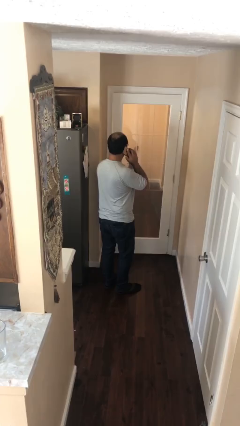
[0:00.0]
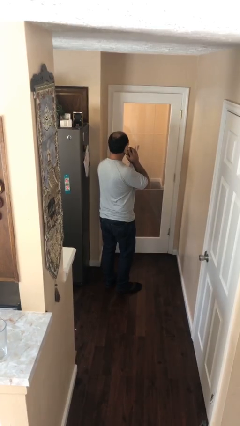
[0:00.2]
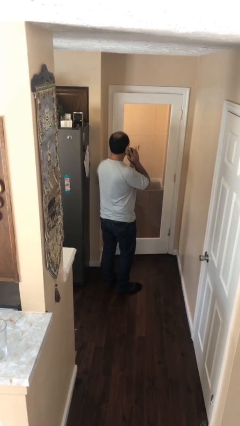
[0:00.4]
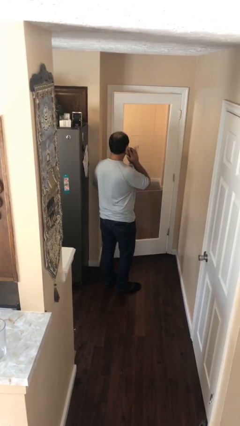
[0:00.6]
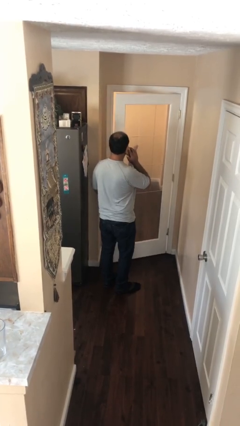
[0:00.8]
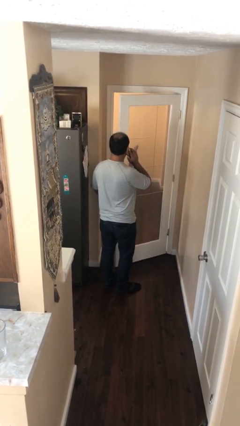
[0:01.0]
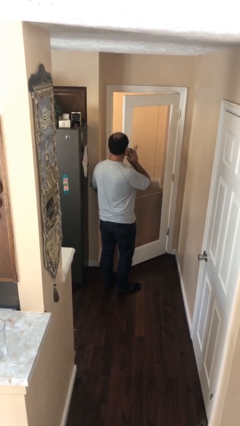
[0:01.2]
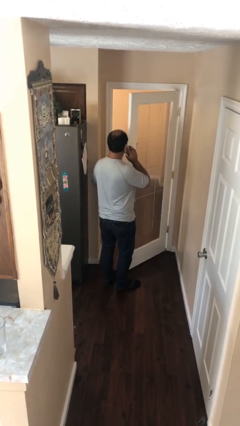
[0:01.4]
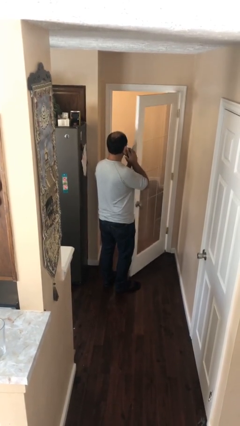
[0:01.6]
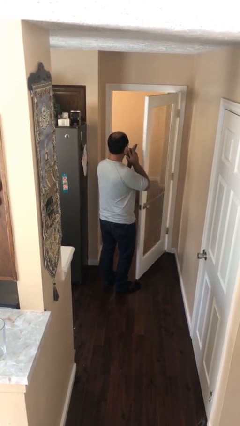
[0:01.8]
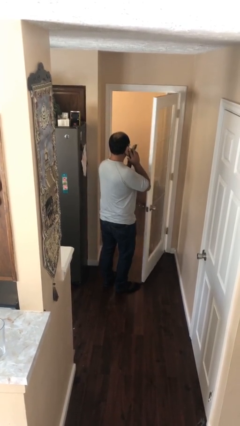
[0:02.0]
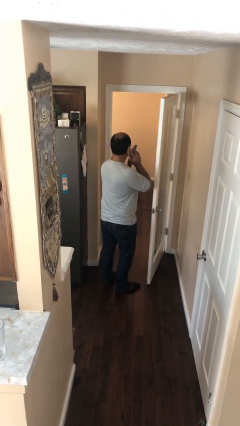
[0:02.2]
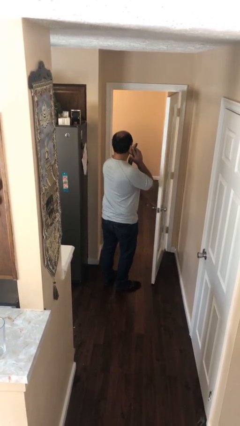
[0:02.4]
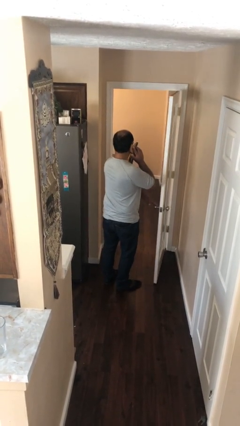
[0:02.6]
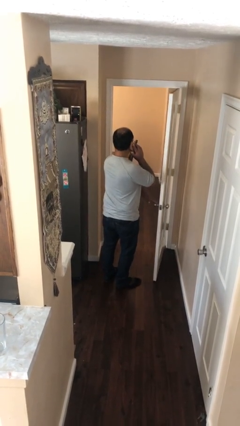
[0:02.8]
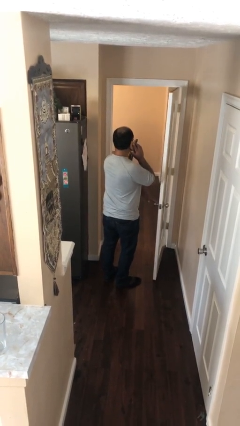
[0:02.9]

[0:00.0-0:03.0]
person opens facility door

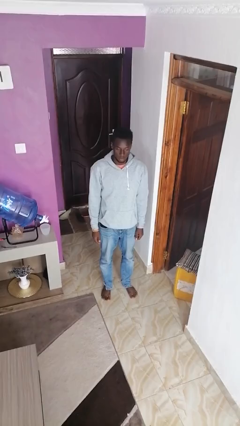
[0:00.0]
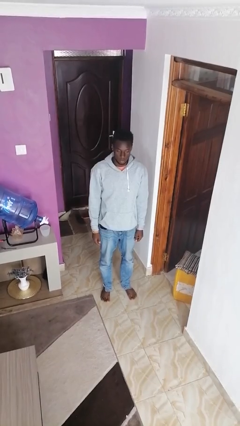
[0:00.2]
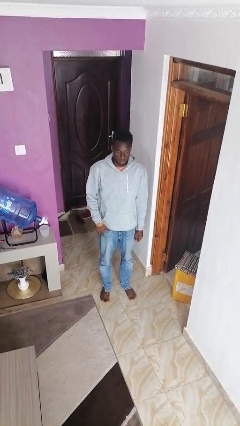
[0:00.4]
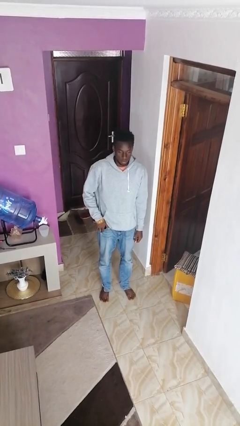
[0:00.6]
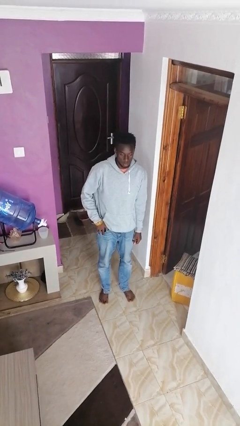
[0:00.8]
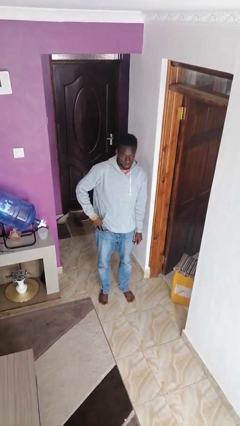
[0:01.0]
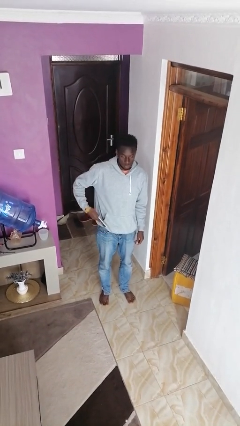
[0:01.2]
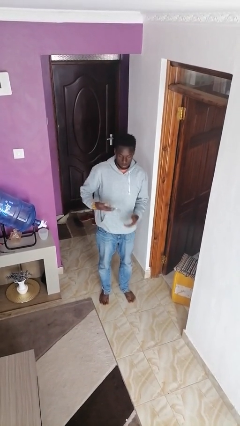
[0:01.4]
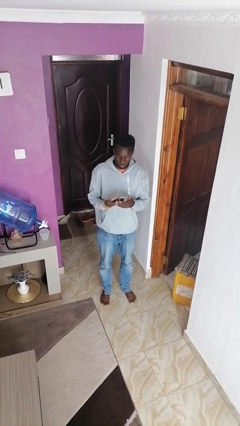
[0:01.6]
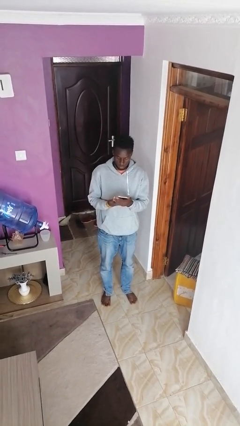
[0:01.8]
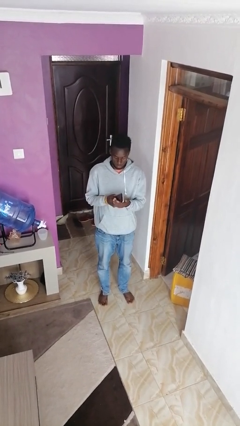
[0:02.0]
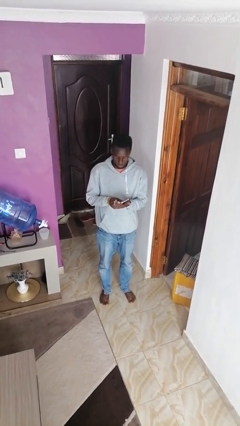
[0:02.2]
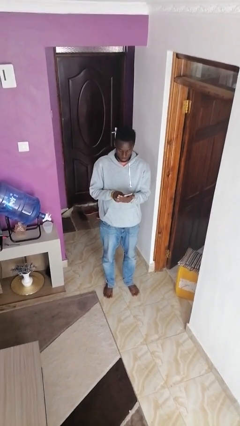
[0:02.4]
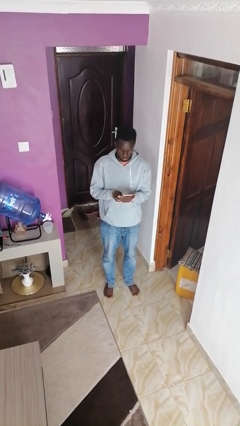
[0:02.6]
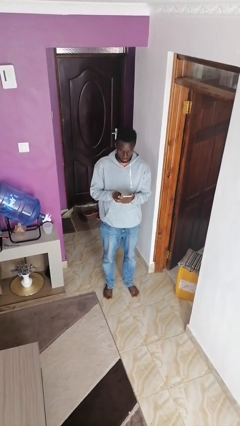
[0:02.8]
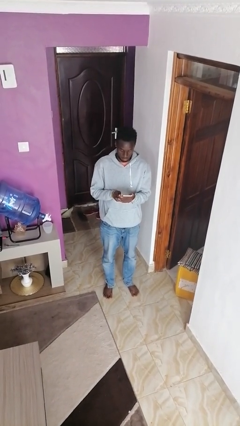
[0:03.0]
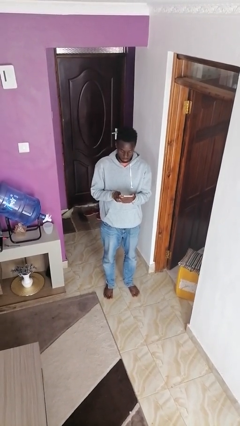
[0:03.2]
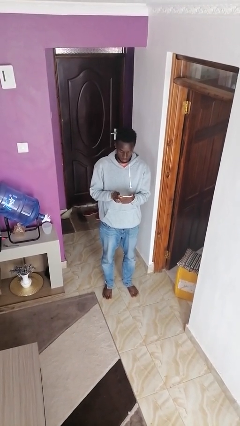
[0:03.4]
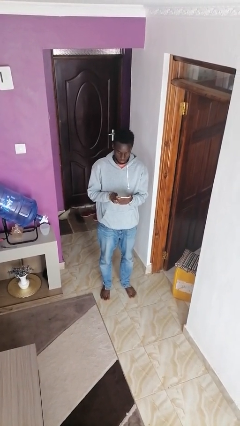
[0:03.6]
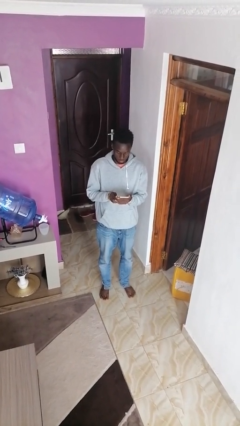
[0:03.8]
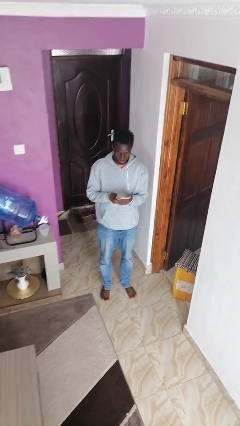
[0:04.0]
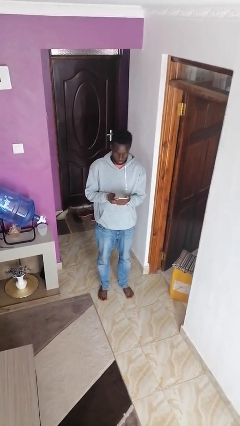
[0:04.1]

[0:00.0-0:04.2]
person takes phone from pocket

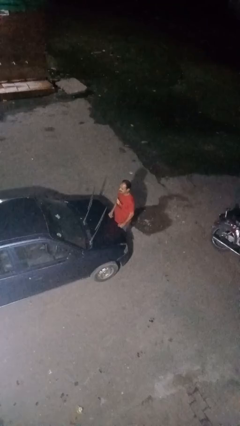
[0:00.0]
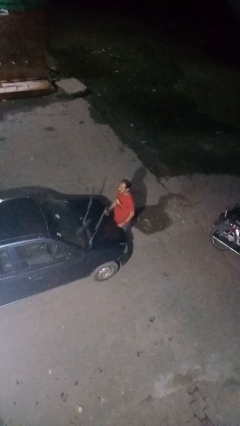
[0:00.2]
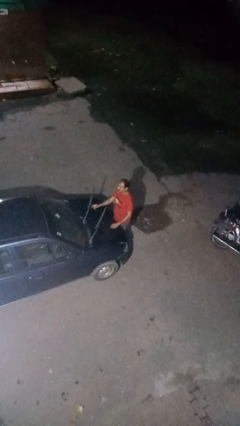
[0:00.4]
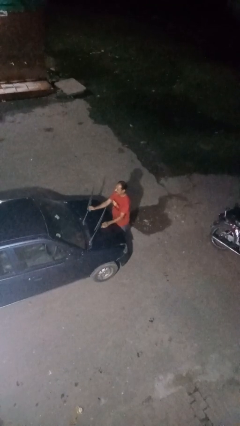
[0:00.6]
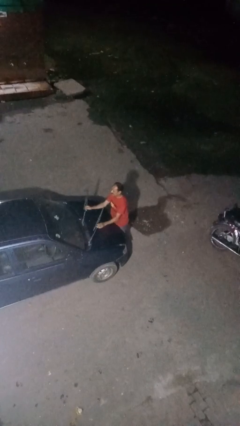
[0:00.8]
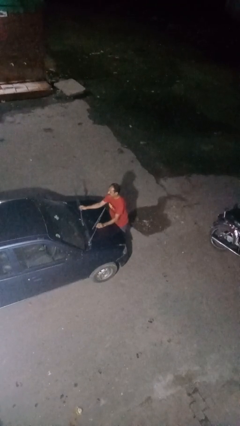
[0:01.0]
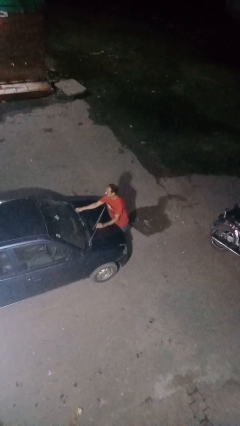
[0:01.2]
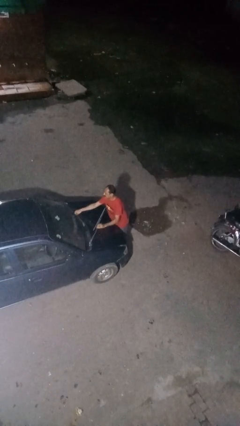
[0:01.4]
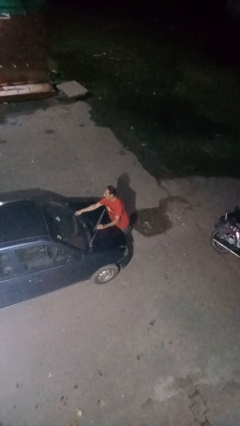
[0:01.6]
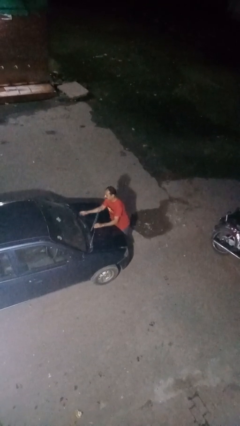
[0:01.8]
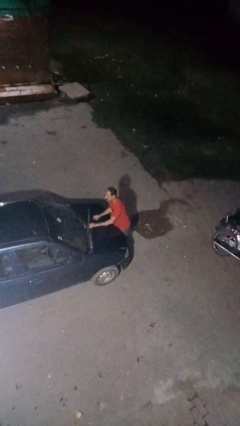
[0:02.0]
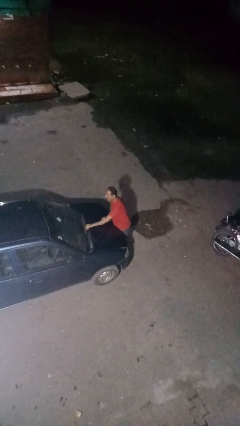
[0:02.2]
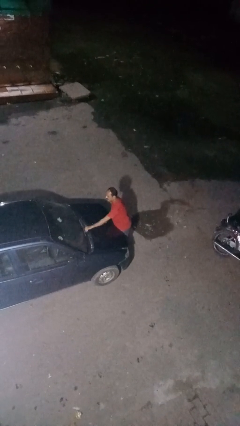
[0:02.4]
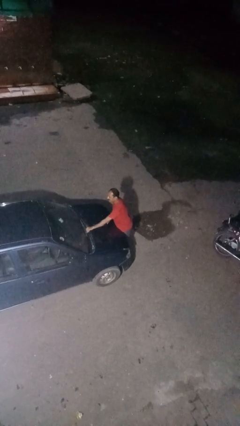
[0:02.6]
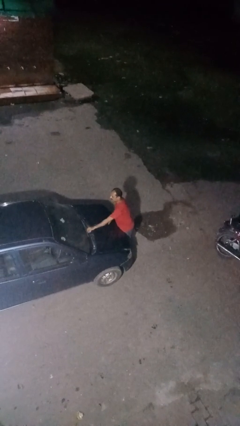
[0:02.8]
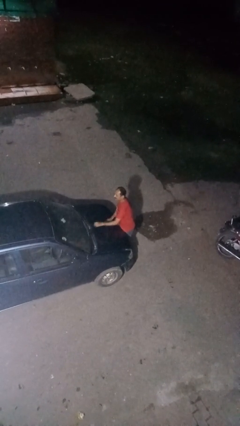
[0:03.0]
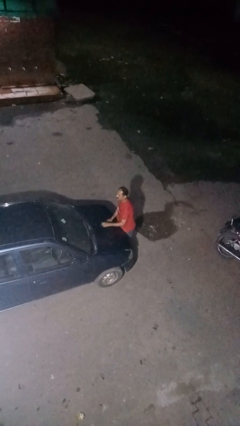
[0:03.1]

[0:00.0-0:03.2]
person flips down car wipers

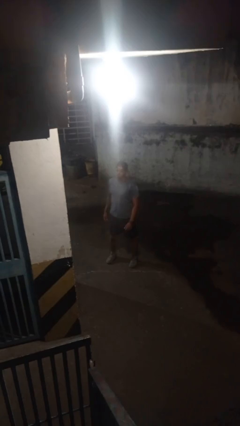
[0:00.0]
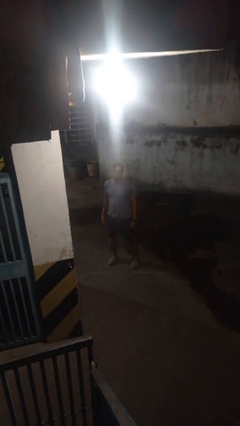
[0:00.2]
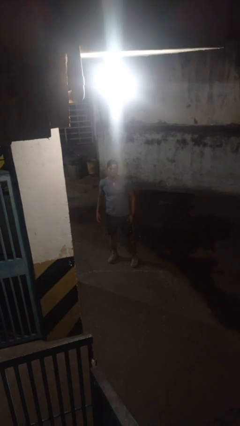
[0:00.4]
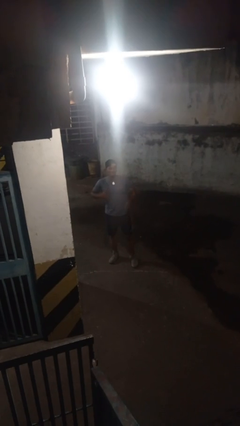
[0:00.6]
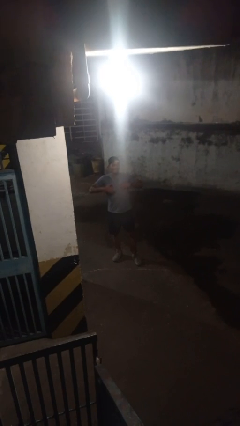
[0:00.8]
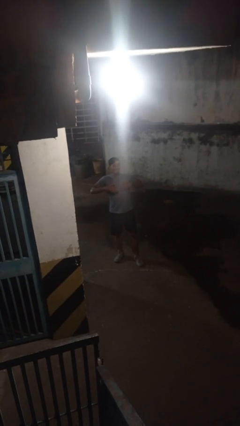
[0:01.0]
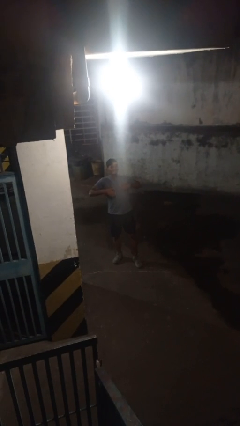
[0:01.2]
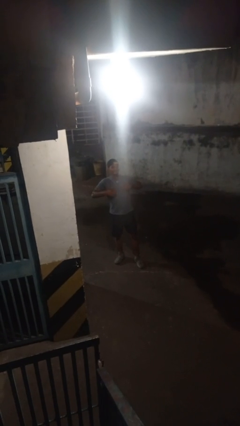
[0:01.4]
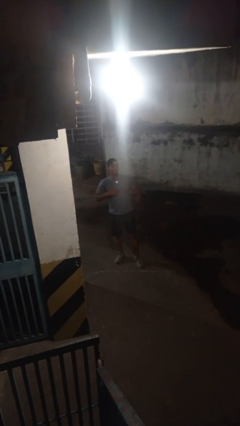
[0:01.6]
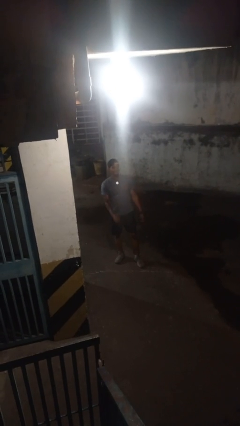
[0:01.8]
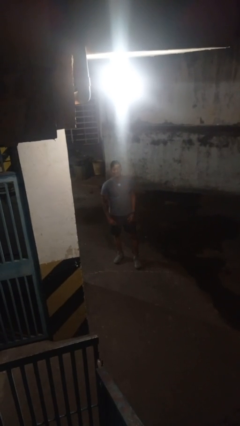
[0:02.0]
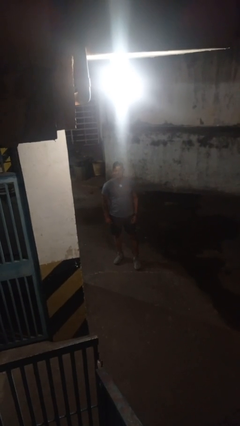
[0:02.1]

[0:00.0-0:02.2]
person drums on chest

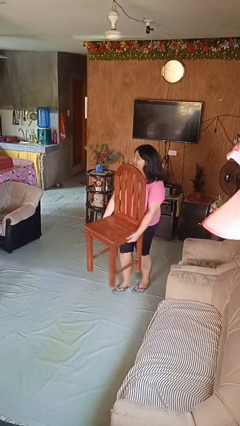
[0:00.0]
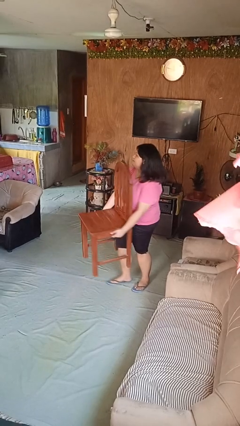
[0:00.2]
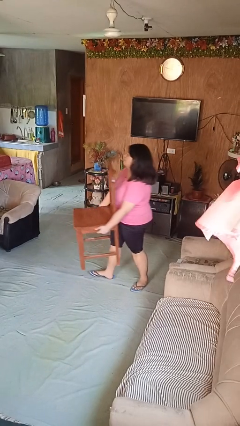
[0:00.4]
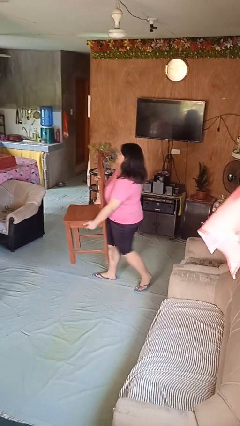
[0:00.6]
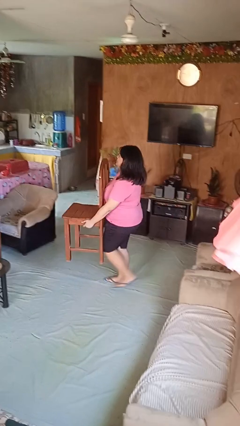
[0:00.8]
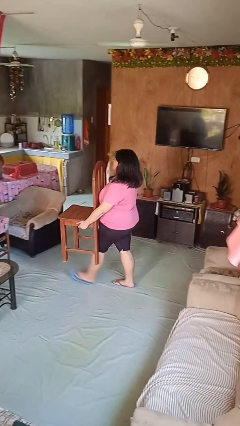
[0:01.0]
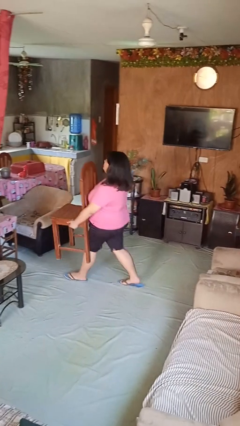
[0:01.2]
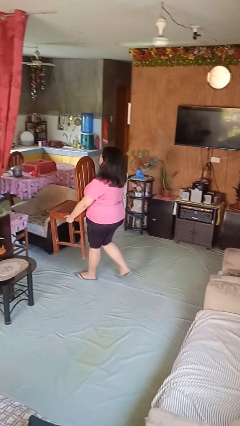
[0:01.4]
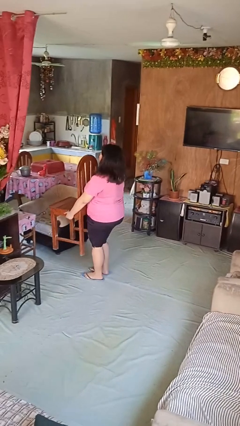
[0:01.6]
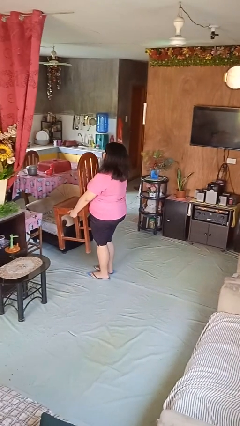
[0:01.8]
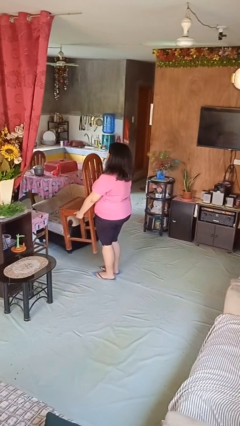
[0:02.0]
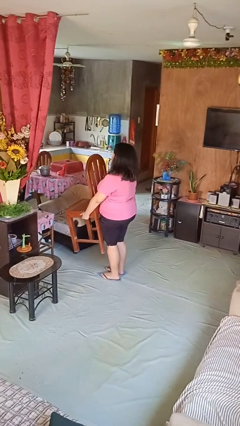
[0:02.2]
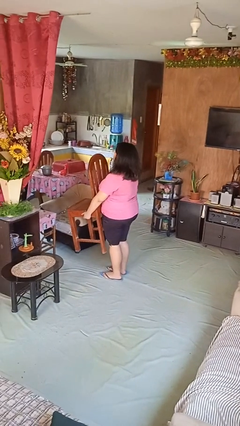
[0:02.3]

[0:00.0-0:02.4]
person carries furniture

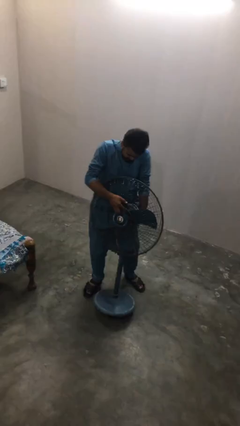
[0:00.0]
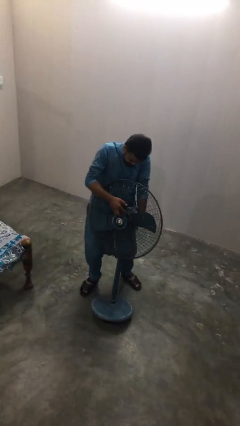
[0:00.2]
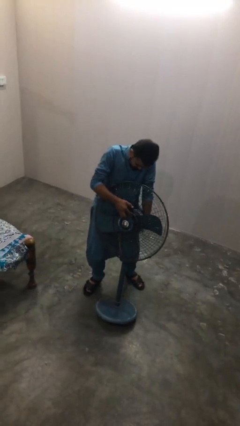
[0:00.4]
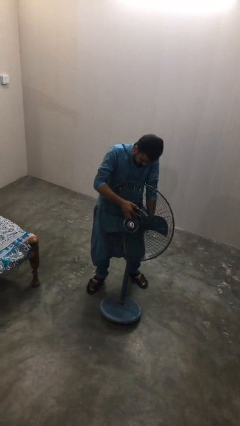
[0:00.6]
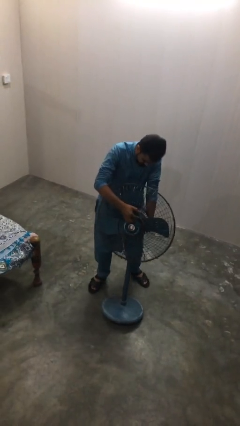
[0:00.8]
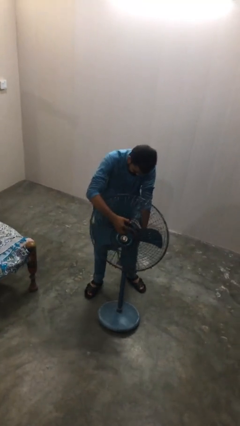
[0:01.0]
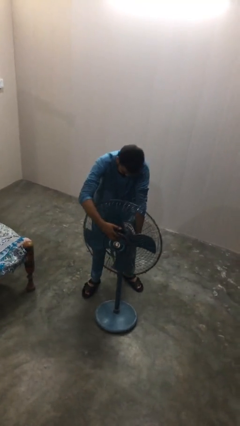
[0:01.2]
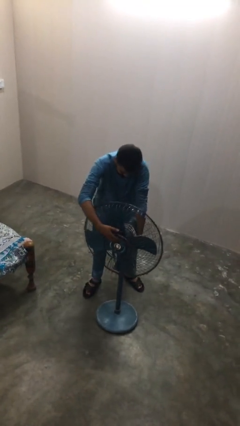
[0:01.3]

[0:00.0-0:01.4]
person puts down object on floor

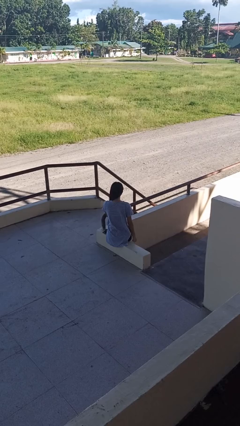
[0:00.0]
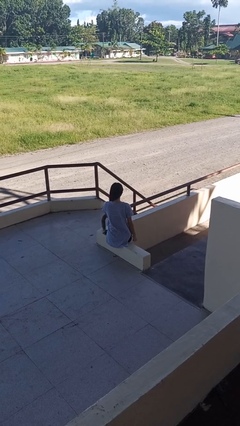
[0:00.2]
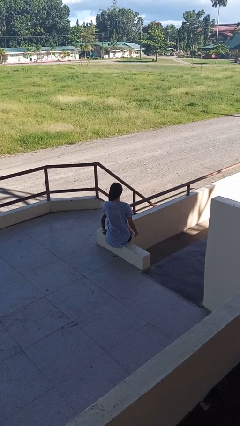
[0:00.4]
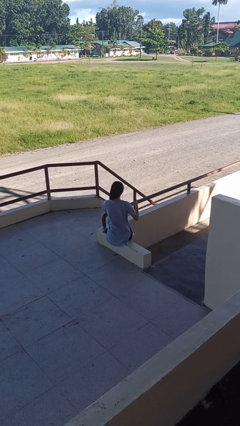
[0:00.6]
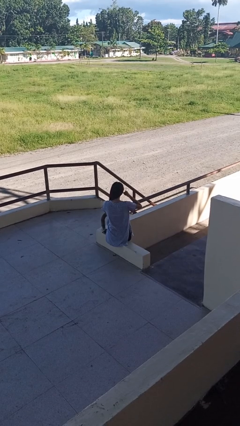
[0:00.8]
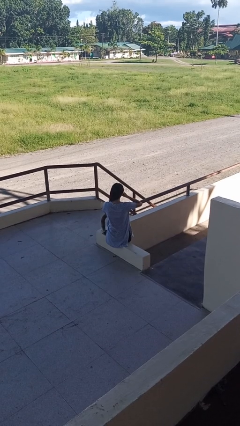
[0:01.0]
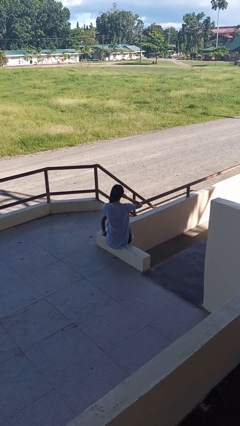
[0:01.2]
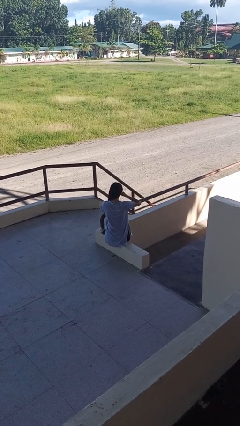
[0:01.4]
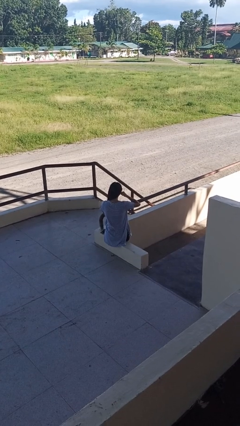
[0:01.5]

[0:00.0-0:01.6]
person gestures call me
